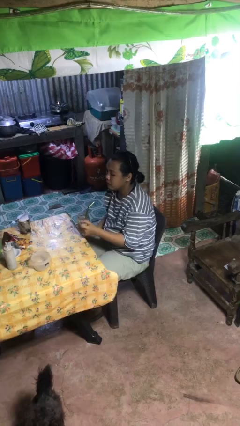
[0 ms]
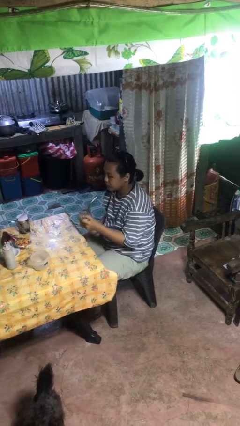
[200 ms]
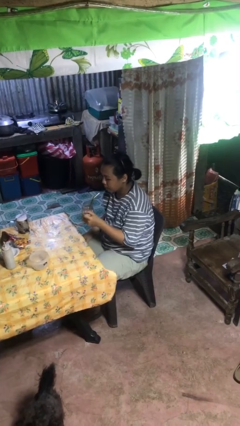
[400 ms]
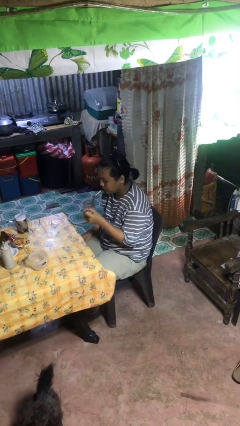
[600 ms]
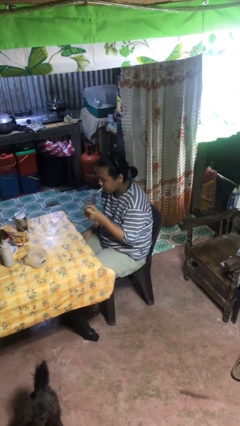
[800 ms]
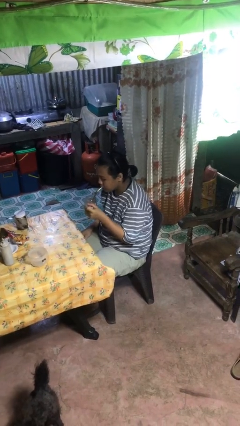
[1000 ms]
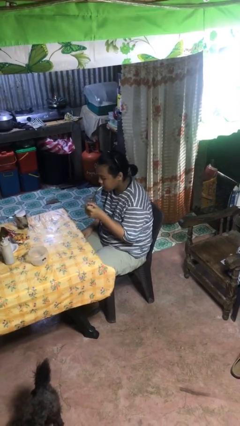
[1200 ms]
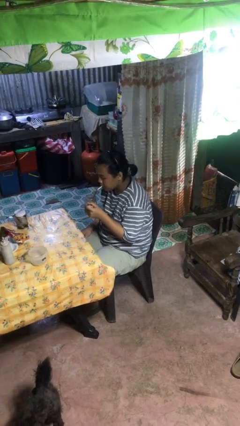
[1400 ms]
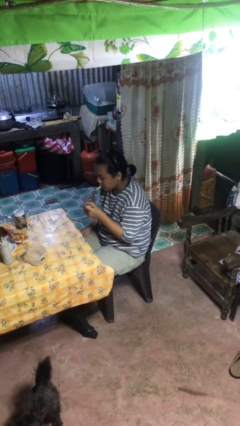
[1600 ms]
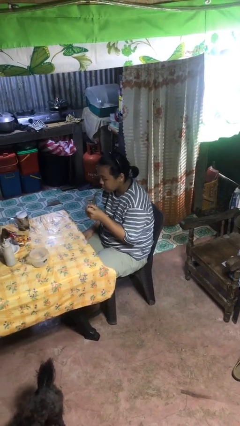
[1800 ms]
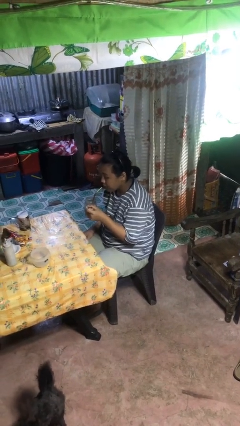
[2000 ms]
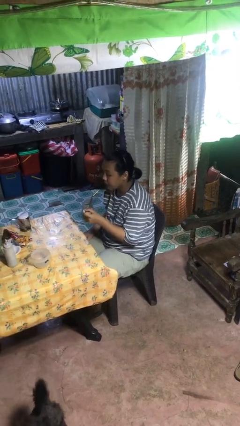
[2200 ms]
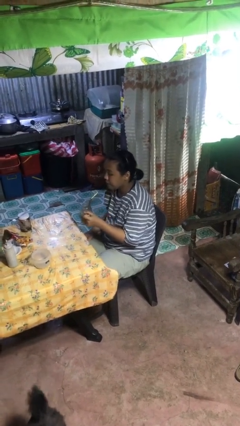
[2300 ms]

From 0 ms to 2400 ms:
person drinks from straw

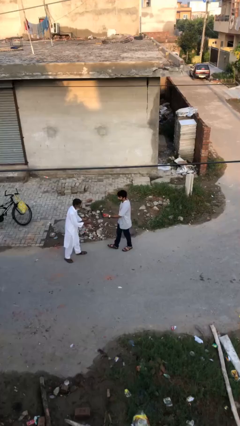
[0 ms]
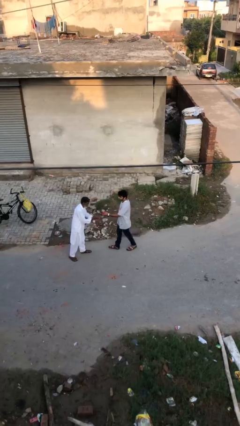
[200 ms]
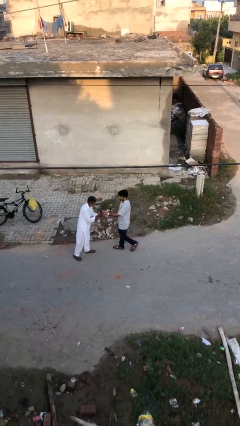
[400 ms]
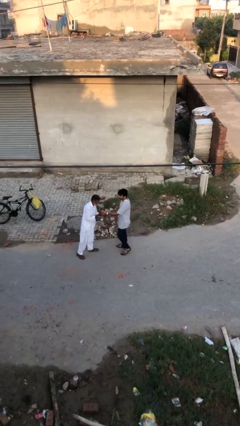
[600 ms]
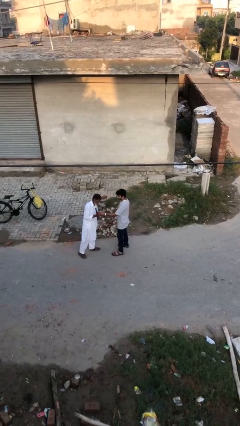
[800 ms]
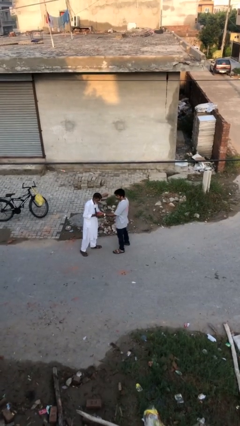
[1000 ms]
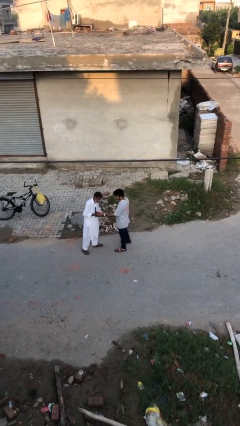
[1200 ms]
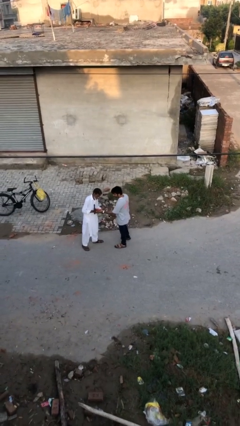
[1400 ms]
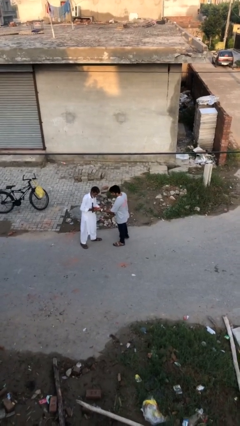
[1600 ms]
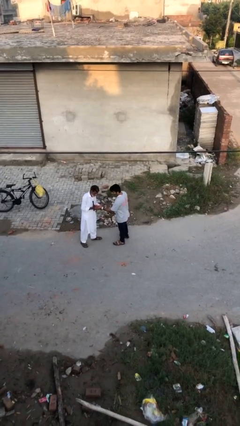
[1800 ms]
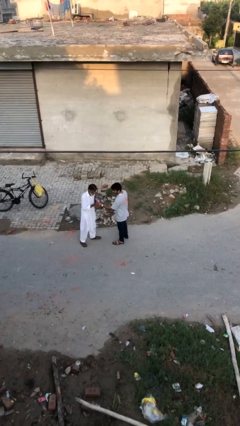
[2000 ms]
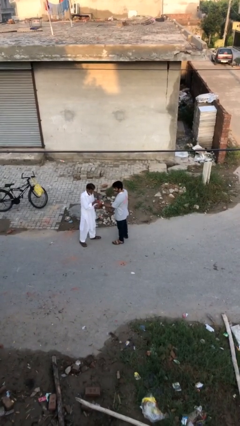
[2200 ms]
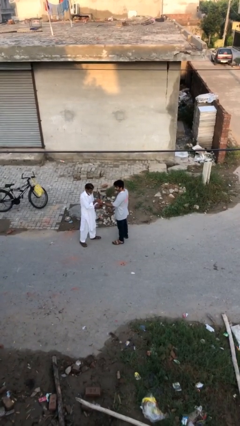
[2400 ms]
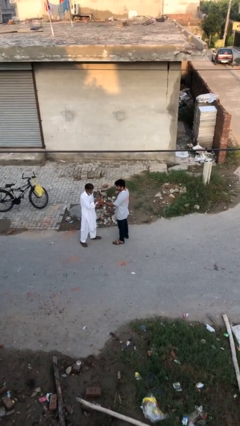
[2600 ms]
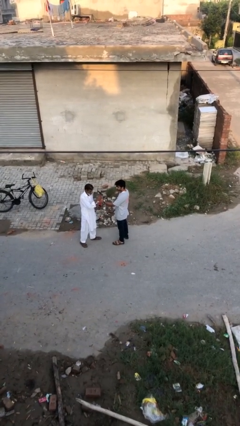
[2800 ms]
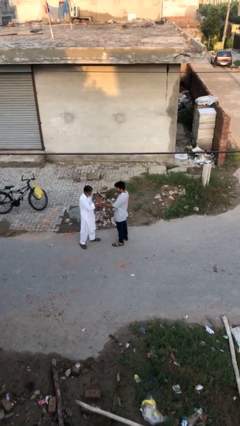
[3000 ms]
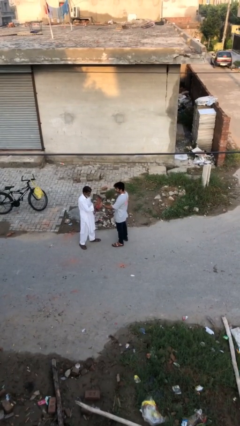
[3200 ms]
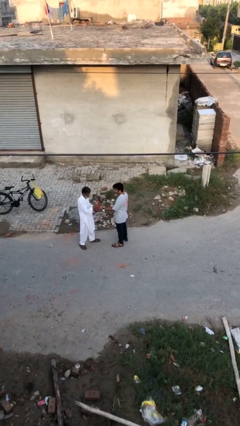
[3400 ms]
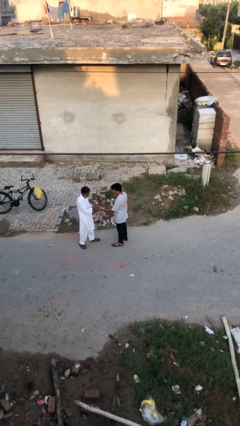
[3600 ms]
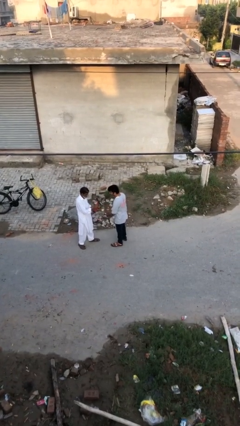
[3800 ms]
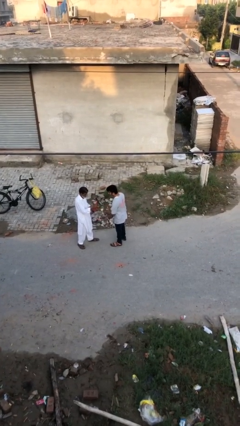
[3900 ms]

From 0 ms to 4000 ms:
person transfers object to person

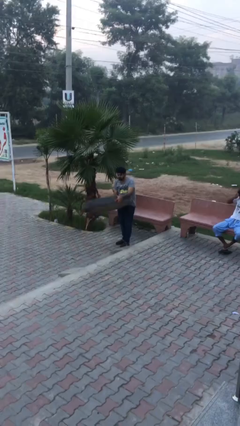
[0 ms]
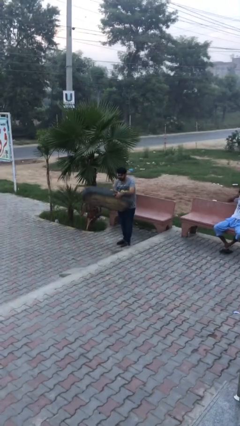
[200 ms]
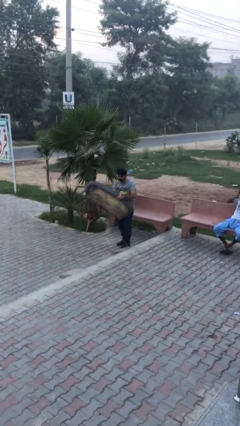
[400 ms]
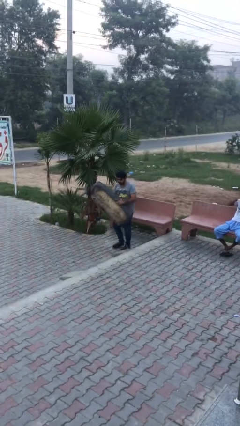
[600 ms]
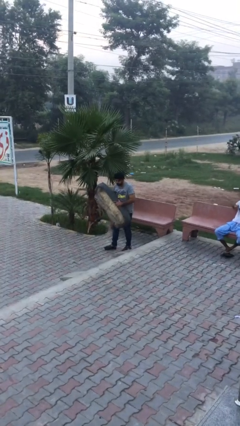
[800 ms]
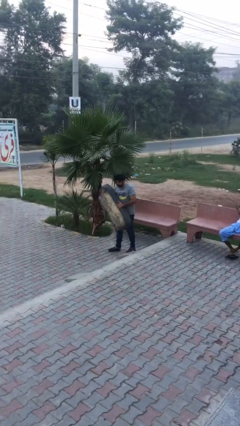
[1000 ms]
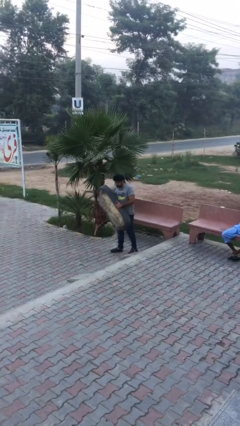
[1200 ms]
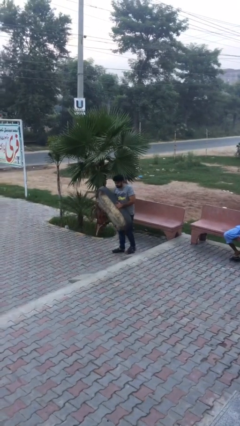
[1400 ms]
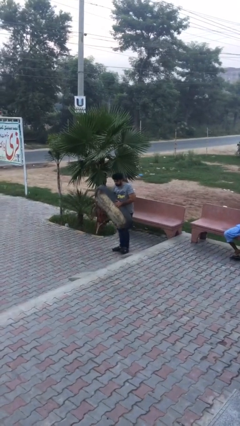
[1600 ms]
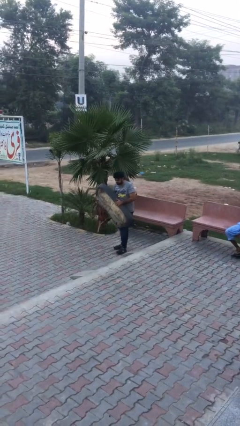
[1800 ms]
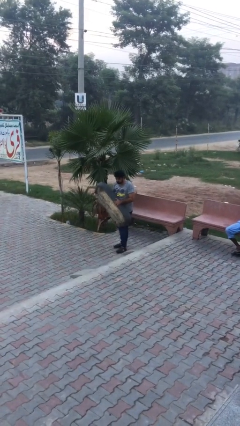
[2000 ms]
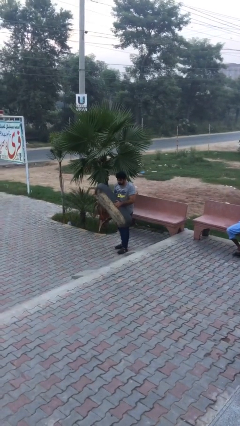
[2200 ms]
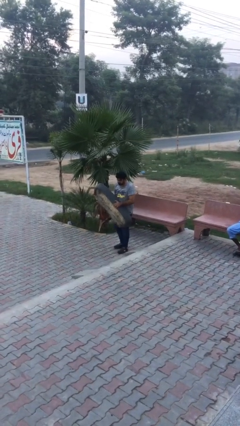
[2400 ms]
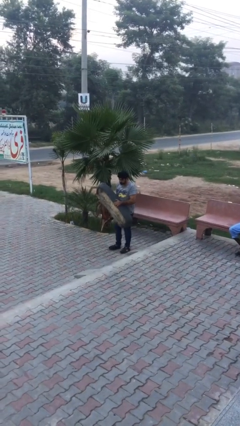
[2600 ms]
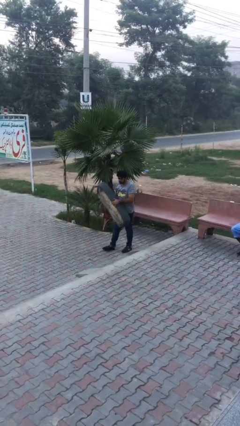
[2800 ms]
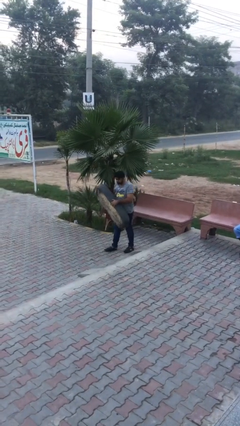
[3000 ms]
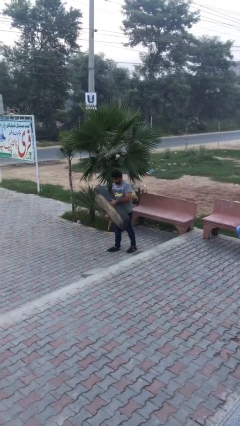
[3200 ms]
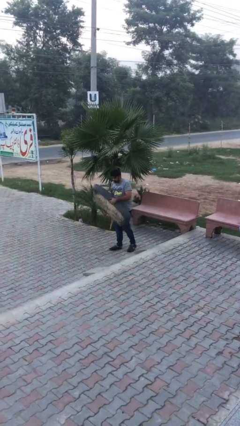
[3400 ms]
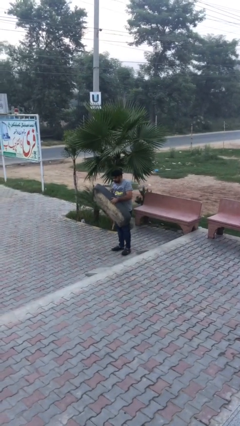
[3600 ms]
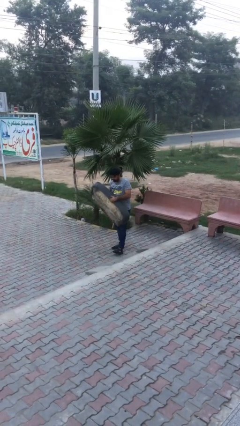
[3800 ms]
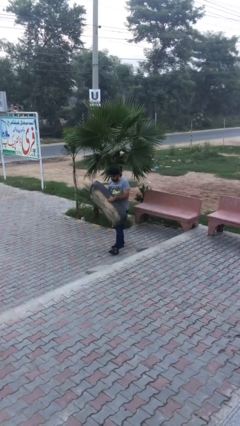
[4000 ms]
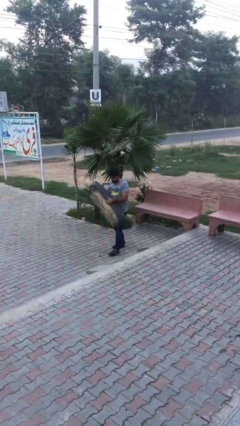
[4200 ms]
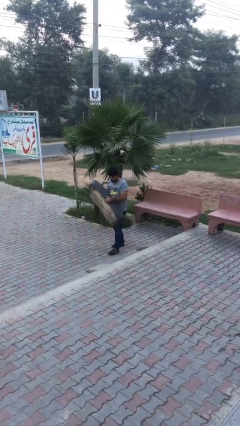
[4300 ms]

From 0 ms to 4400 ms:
person carries heavy object

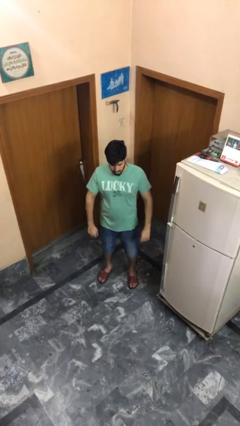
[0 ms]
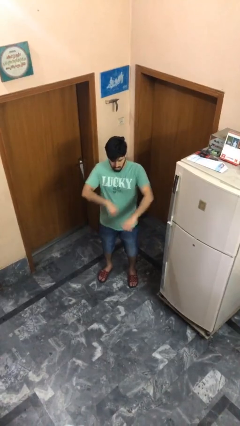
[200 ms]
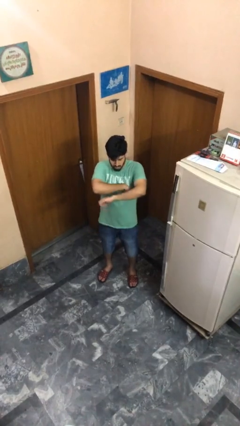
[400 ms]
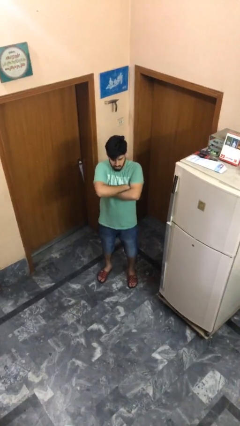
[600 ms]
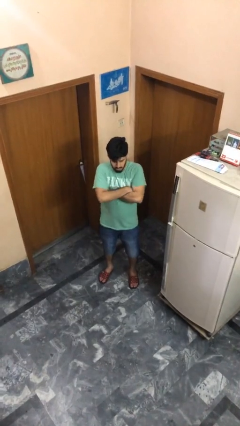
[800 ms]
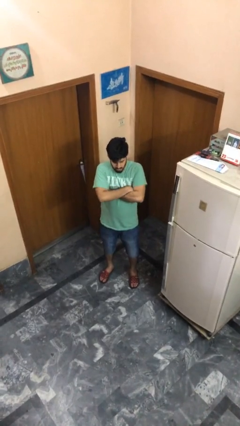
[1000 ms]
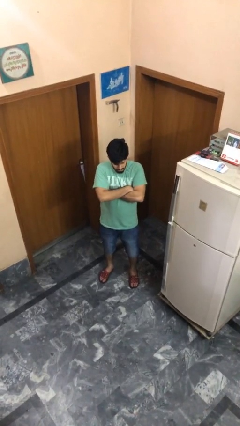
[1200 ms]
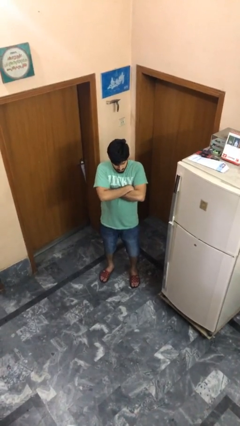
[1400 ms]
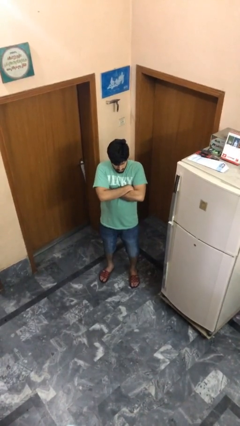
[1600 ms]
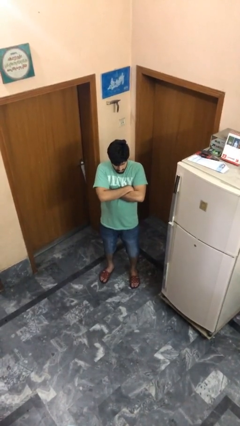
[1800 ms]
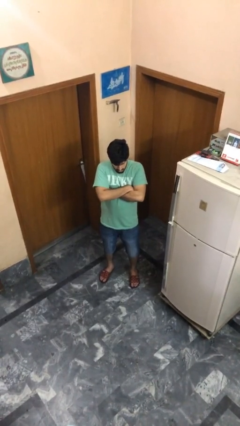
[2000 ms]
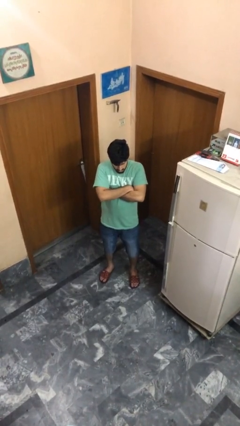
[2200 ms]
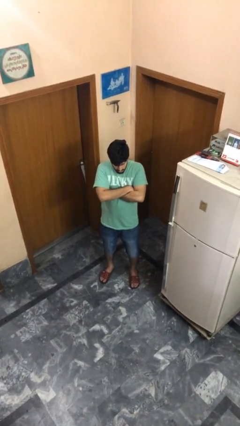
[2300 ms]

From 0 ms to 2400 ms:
person crosses arms

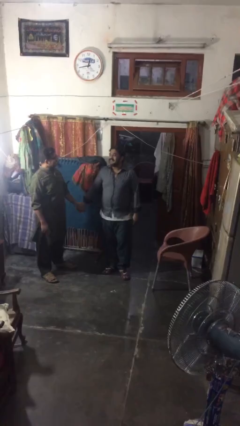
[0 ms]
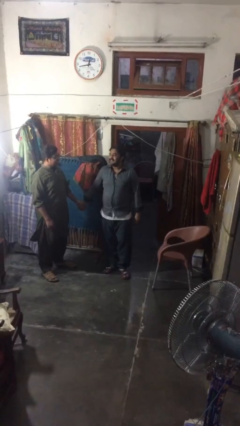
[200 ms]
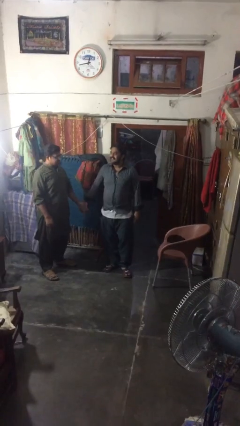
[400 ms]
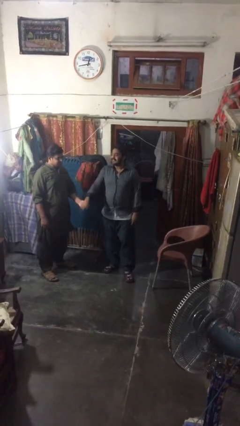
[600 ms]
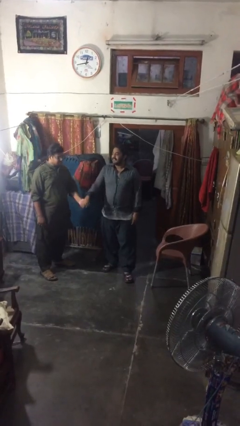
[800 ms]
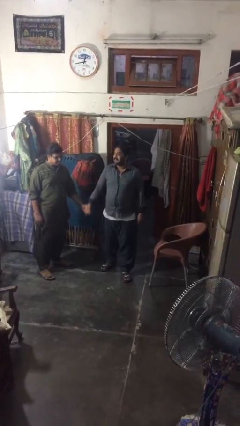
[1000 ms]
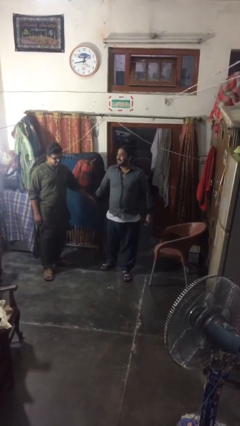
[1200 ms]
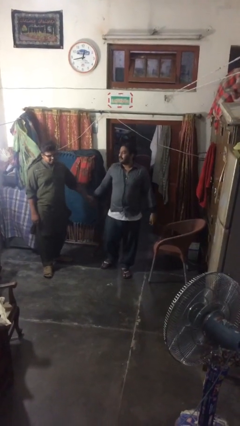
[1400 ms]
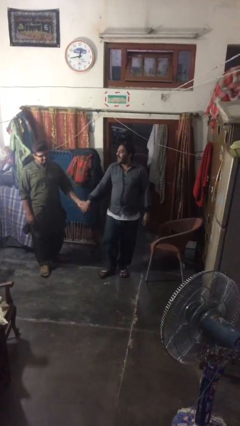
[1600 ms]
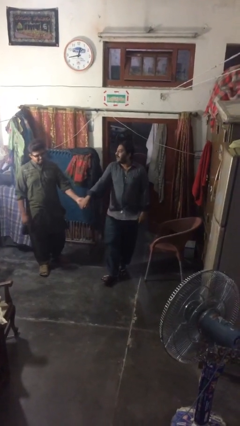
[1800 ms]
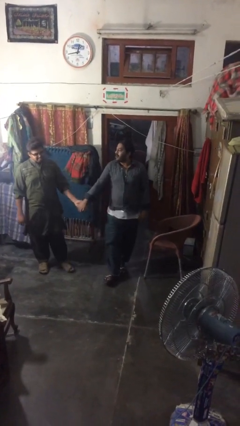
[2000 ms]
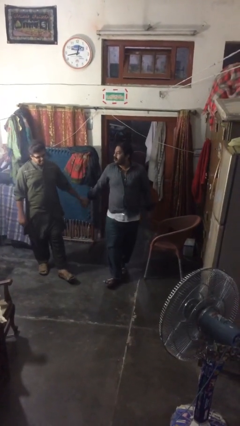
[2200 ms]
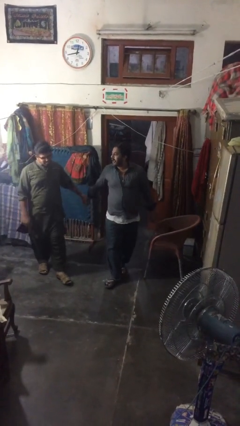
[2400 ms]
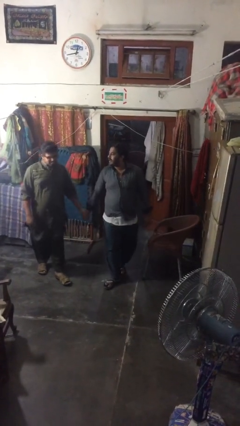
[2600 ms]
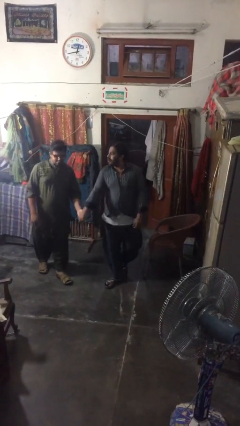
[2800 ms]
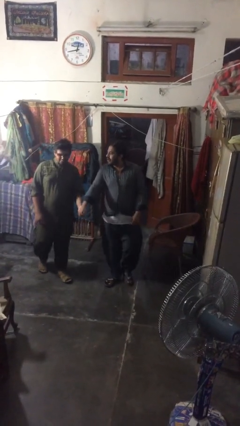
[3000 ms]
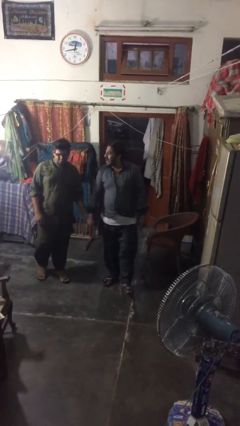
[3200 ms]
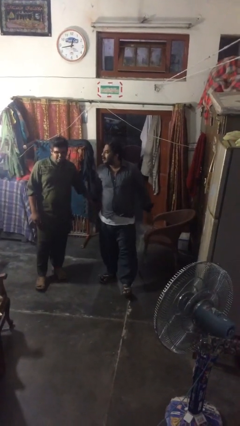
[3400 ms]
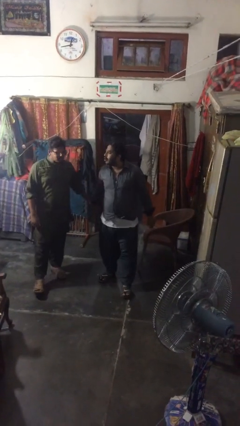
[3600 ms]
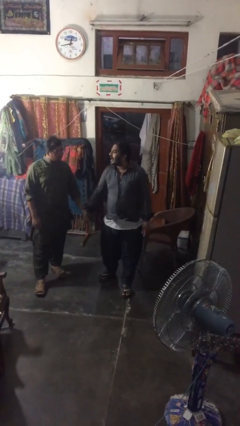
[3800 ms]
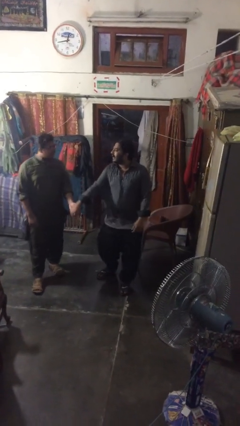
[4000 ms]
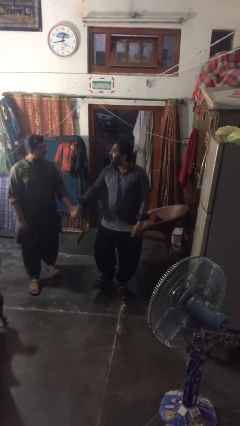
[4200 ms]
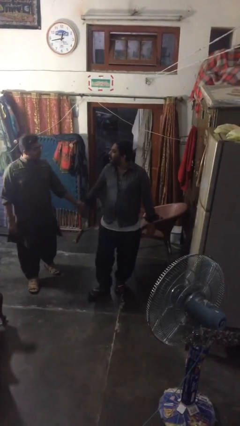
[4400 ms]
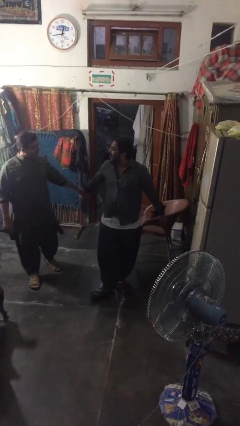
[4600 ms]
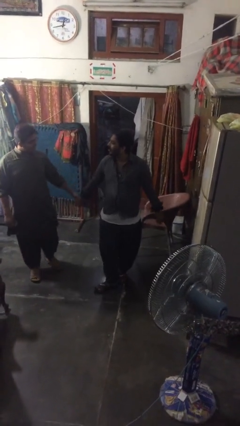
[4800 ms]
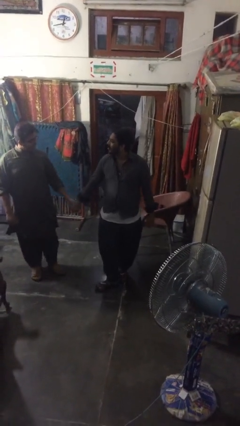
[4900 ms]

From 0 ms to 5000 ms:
person holds hand
